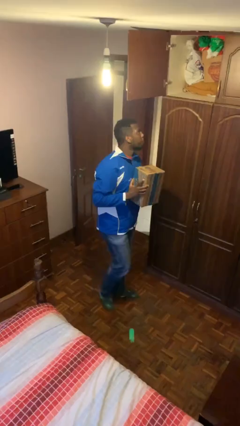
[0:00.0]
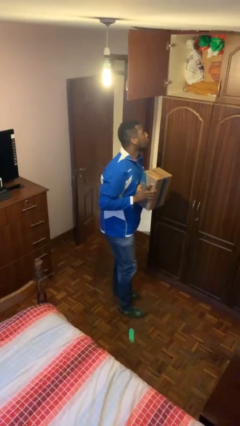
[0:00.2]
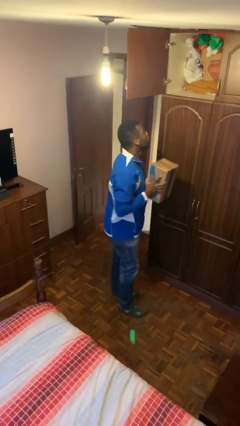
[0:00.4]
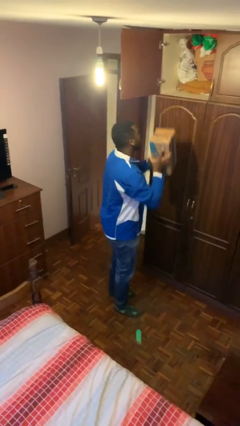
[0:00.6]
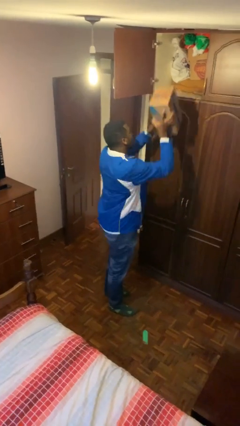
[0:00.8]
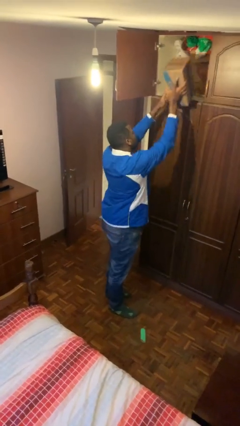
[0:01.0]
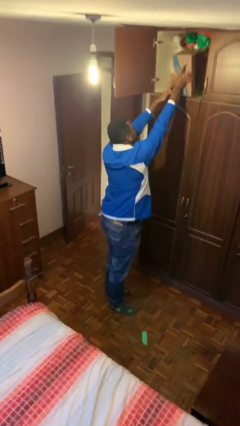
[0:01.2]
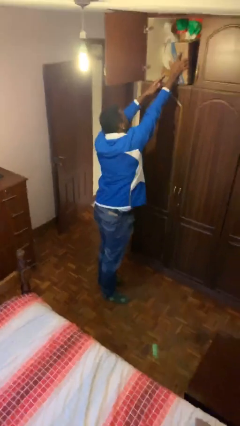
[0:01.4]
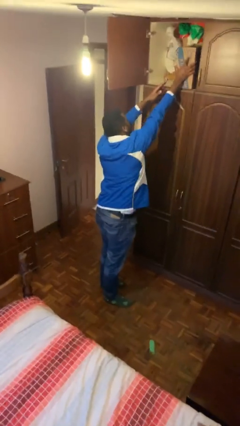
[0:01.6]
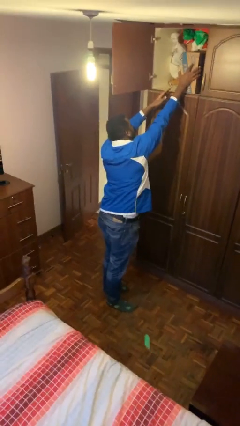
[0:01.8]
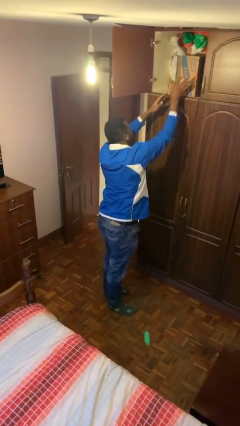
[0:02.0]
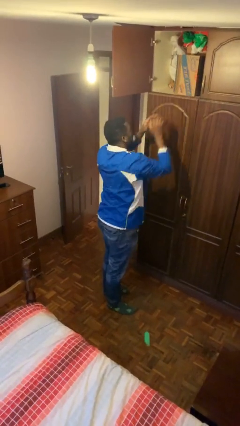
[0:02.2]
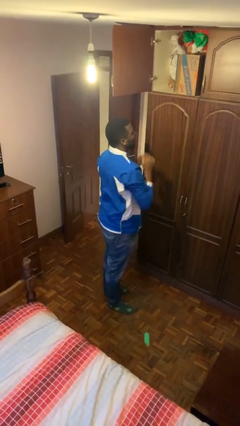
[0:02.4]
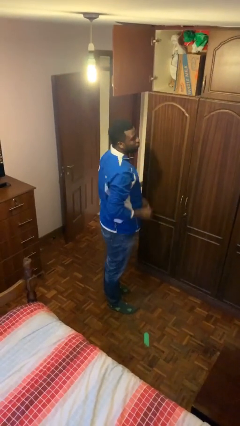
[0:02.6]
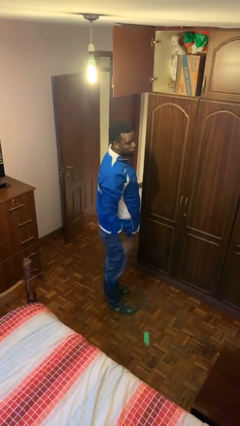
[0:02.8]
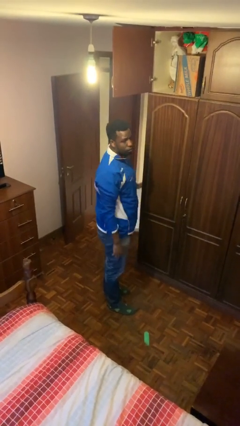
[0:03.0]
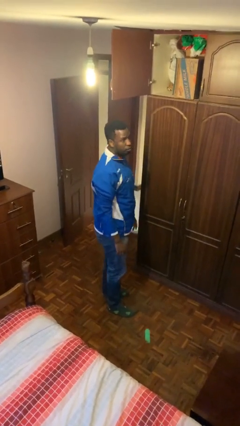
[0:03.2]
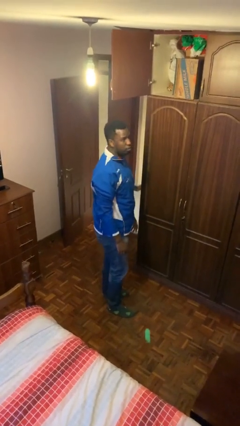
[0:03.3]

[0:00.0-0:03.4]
person puts down object on shelf

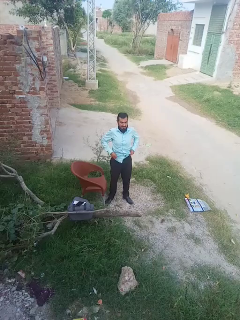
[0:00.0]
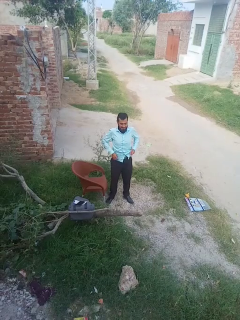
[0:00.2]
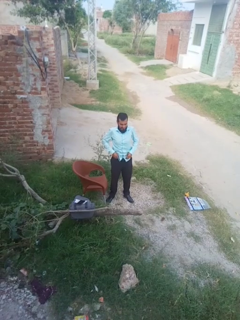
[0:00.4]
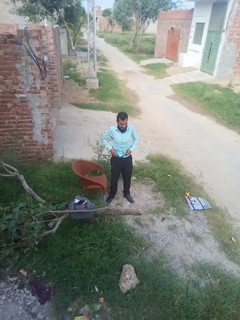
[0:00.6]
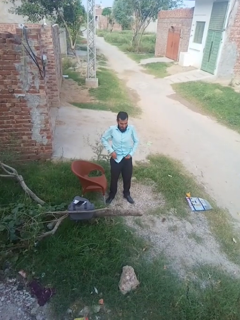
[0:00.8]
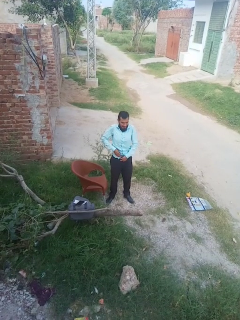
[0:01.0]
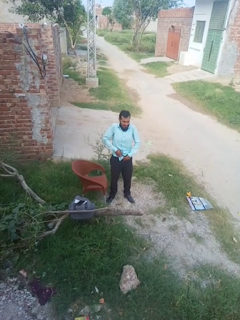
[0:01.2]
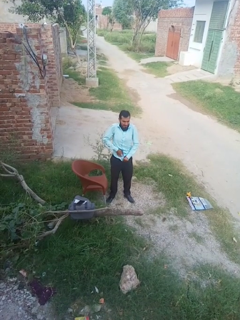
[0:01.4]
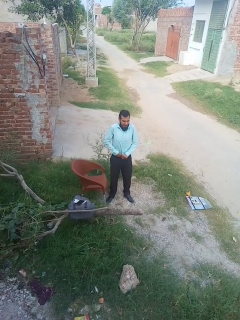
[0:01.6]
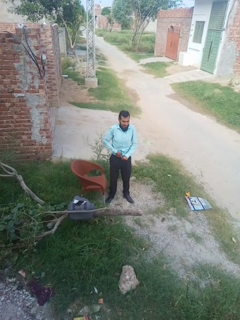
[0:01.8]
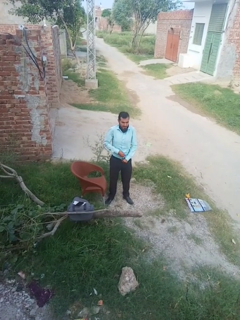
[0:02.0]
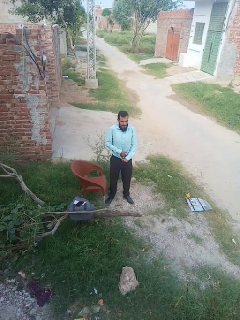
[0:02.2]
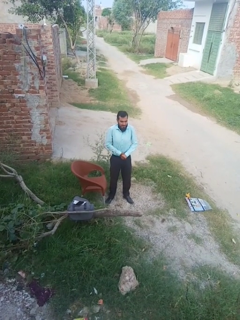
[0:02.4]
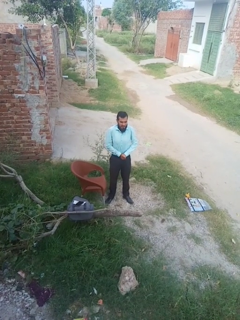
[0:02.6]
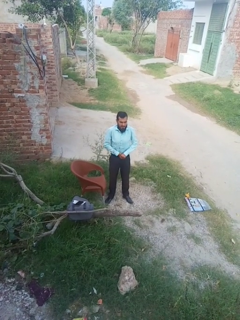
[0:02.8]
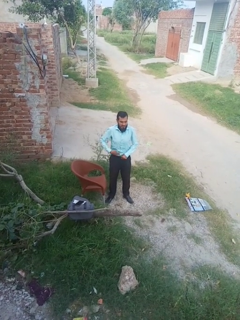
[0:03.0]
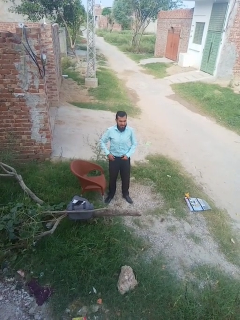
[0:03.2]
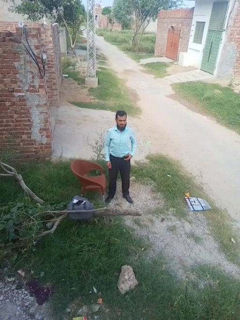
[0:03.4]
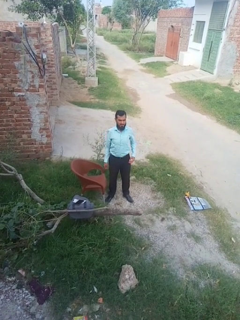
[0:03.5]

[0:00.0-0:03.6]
person tucks in shirt

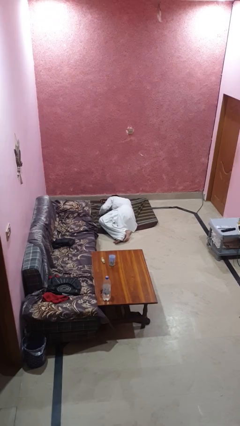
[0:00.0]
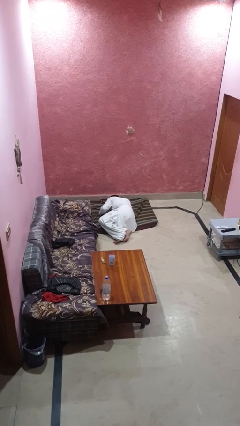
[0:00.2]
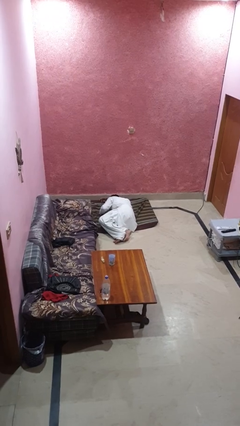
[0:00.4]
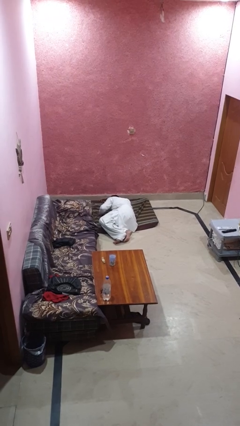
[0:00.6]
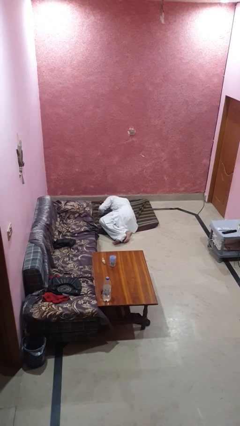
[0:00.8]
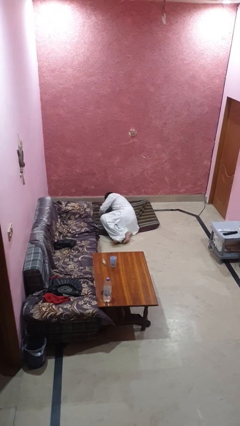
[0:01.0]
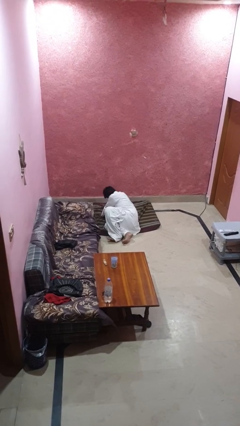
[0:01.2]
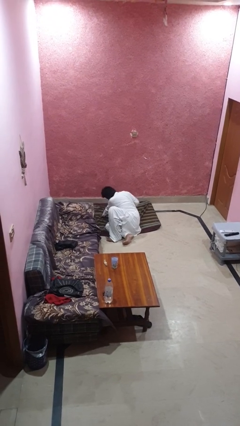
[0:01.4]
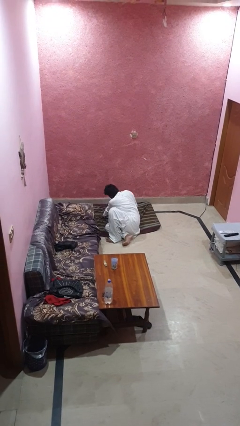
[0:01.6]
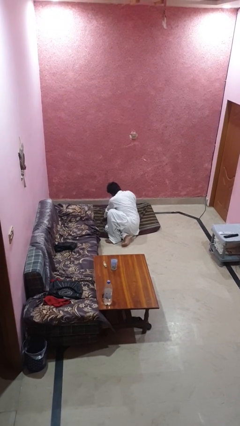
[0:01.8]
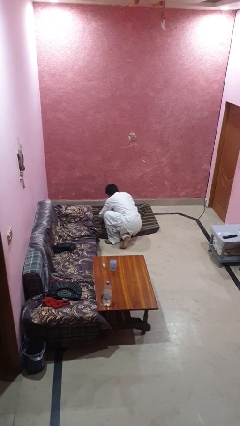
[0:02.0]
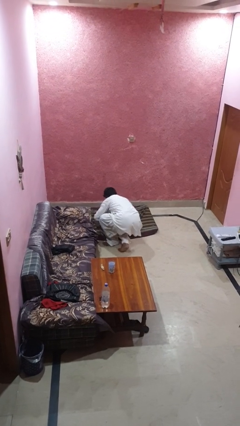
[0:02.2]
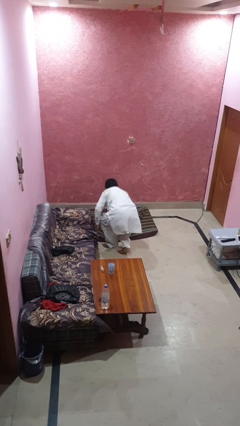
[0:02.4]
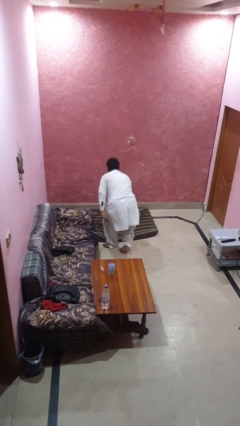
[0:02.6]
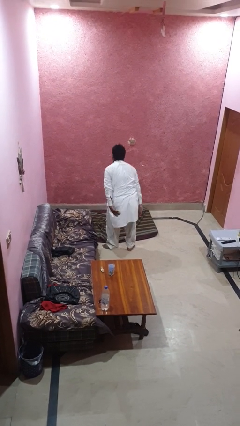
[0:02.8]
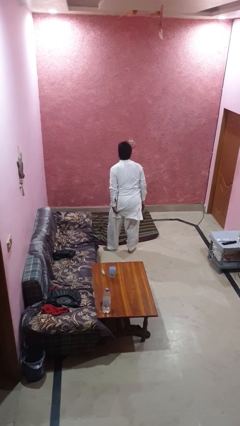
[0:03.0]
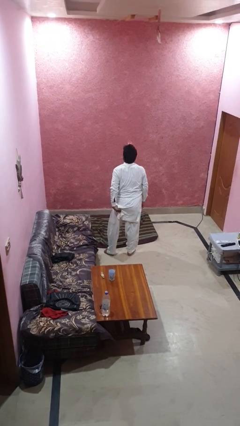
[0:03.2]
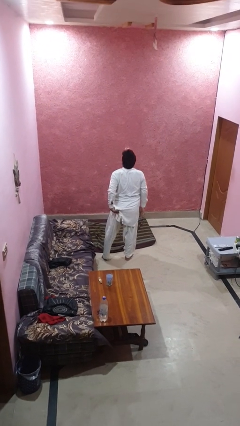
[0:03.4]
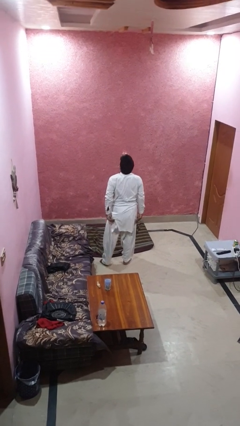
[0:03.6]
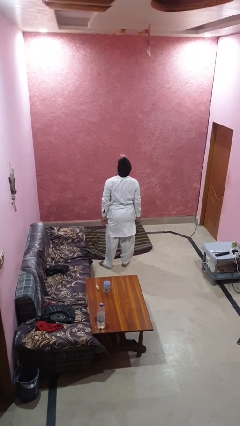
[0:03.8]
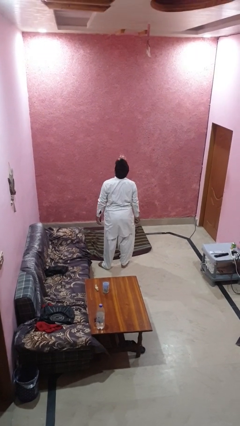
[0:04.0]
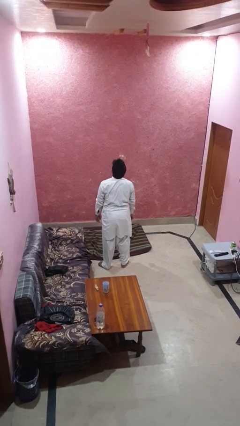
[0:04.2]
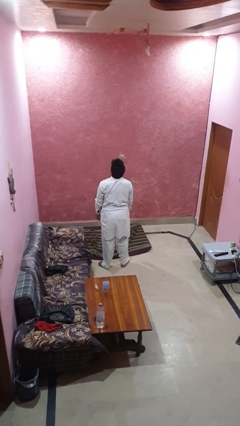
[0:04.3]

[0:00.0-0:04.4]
person stands up from floor

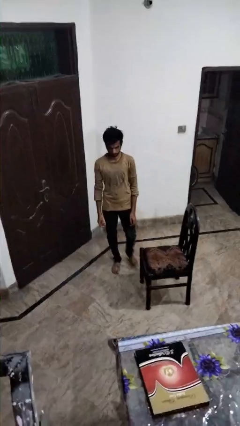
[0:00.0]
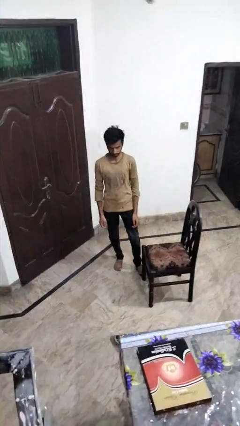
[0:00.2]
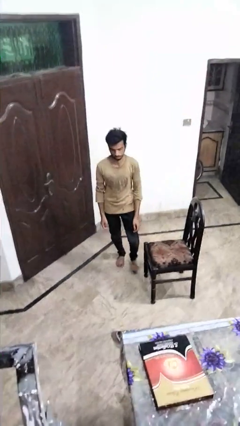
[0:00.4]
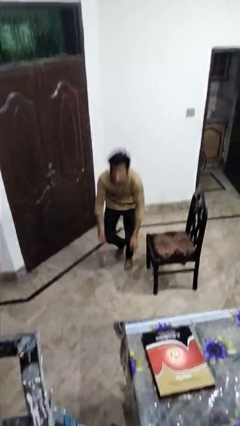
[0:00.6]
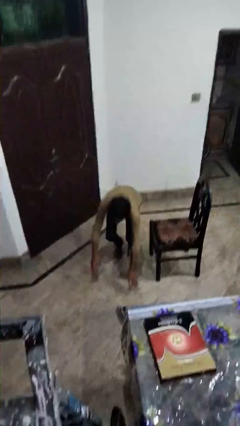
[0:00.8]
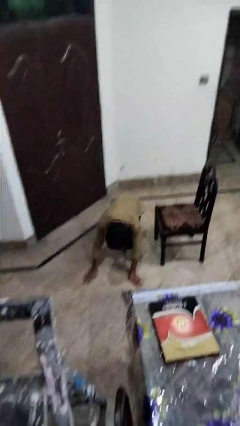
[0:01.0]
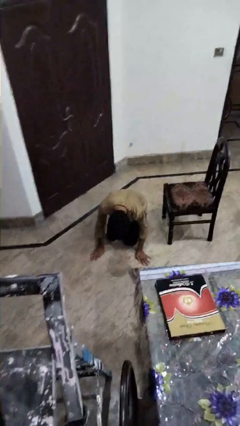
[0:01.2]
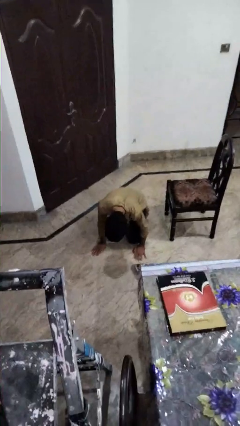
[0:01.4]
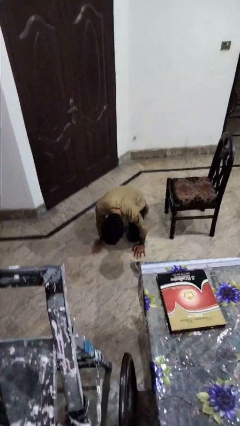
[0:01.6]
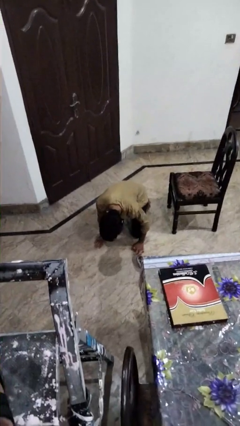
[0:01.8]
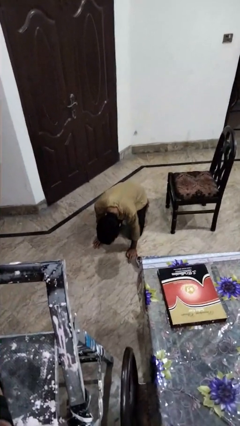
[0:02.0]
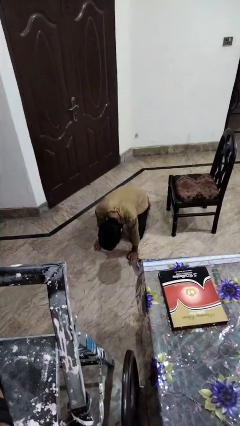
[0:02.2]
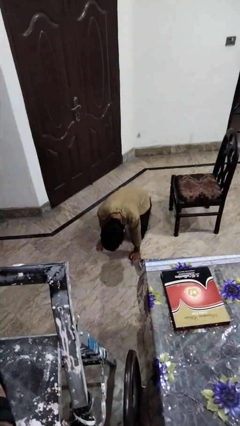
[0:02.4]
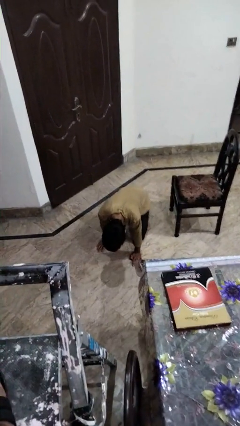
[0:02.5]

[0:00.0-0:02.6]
person trips on object on floor

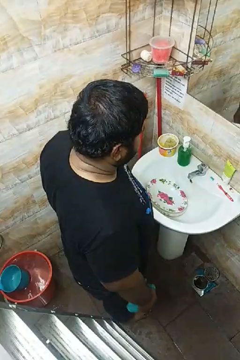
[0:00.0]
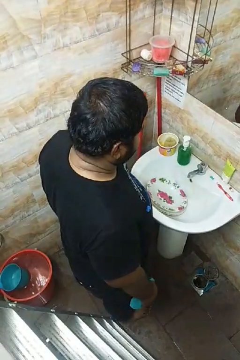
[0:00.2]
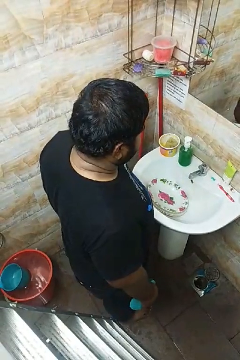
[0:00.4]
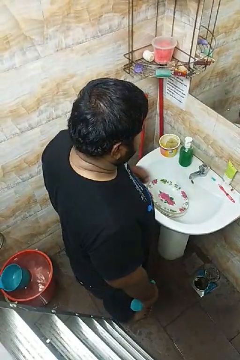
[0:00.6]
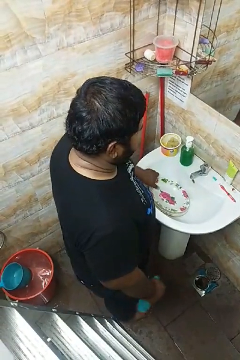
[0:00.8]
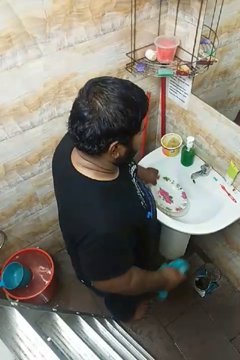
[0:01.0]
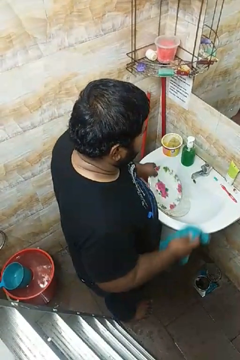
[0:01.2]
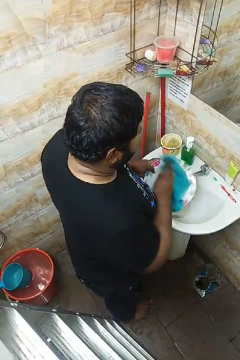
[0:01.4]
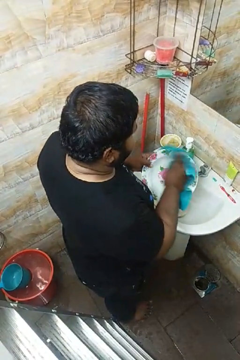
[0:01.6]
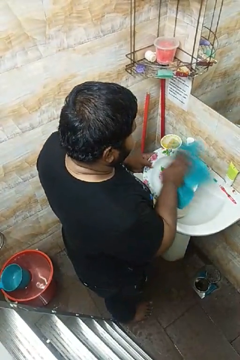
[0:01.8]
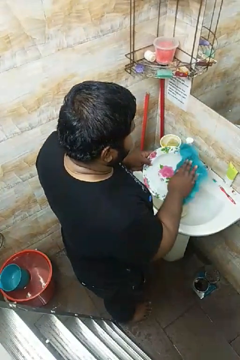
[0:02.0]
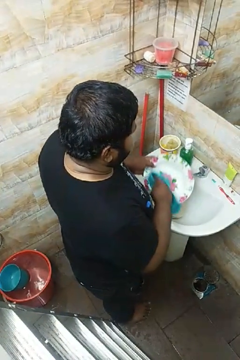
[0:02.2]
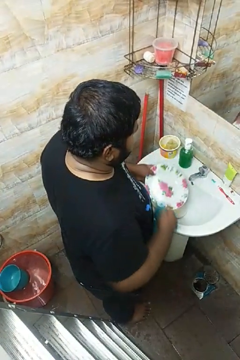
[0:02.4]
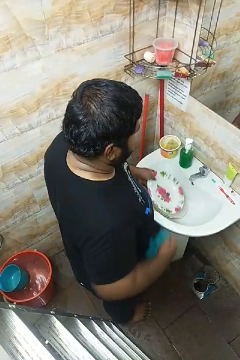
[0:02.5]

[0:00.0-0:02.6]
person dries dish

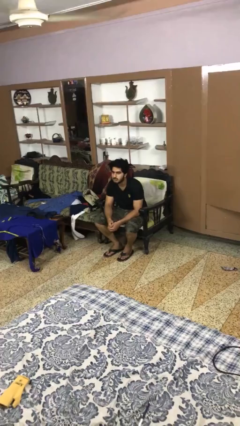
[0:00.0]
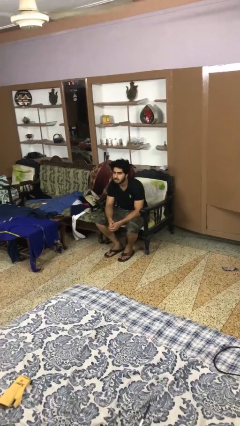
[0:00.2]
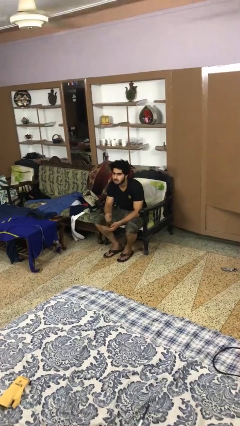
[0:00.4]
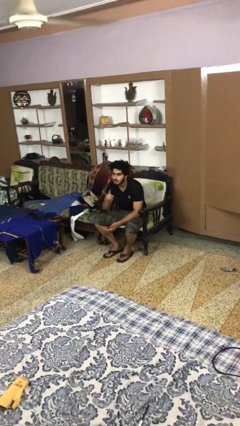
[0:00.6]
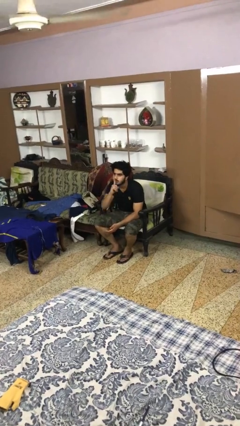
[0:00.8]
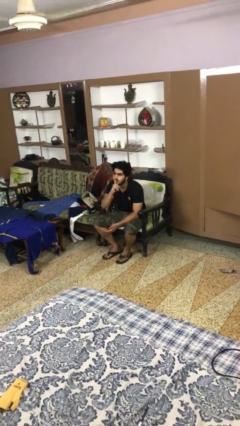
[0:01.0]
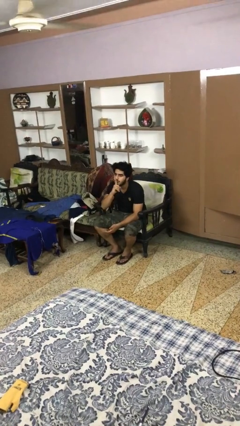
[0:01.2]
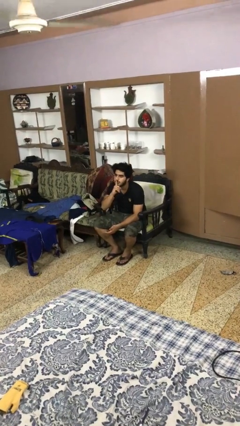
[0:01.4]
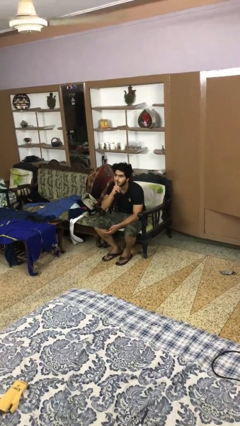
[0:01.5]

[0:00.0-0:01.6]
person gestures be quiet

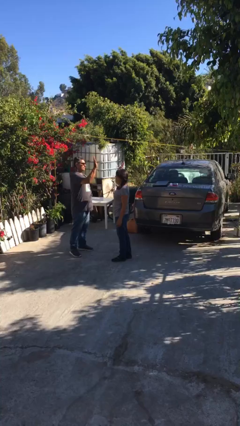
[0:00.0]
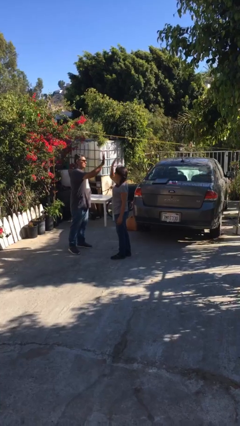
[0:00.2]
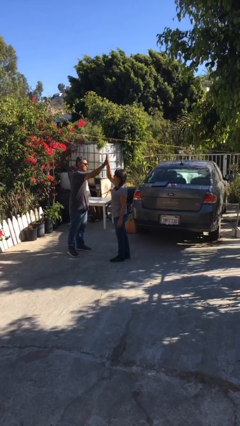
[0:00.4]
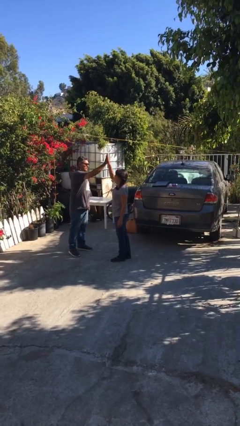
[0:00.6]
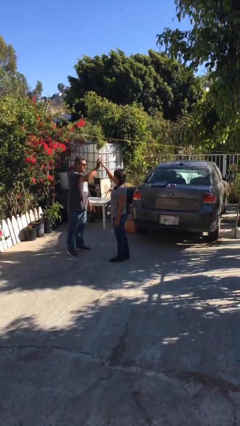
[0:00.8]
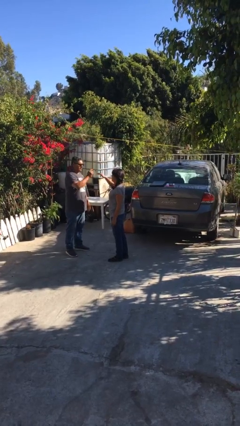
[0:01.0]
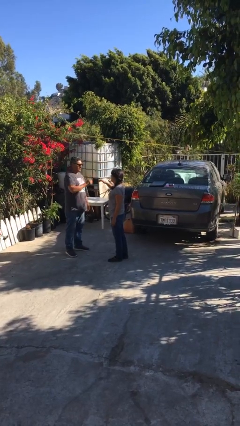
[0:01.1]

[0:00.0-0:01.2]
person highfives hand
